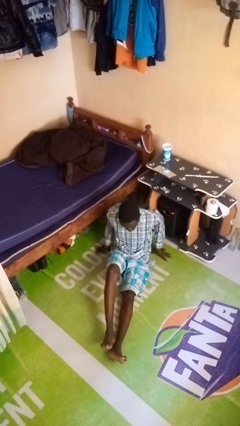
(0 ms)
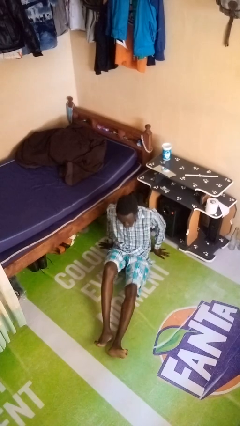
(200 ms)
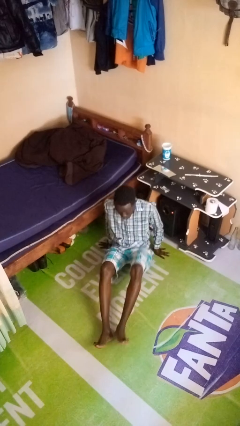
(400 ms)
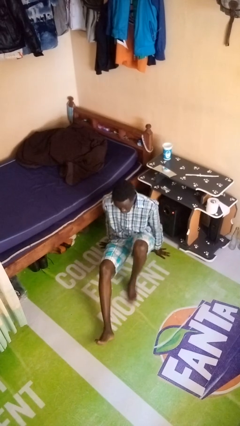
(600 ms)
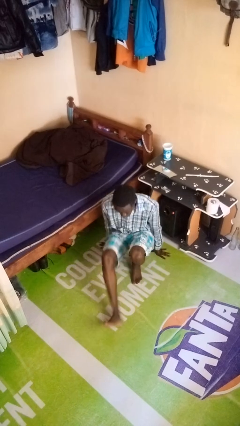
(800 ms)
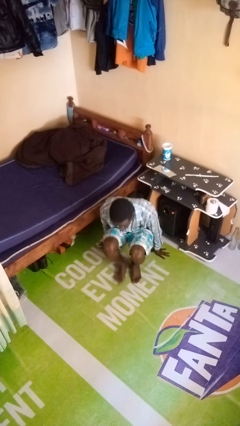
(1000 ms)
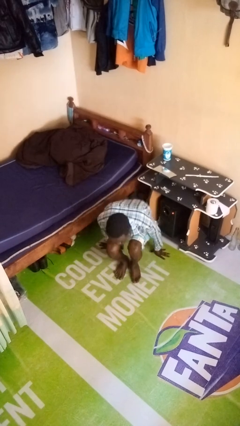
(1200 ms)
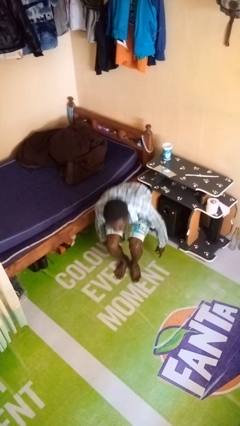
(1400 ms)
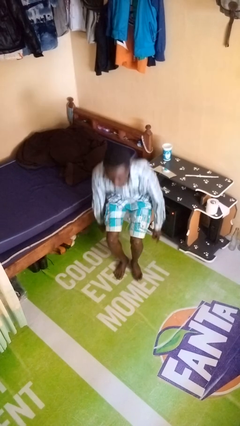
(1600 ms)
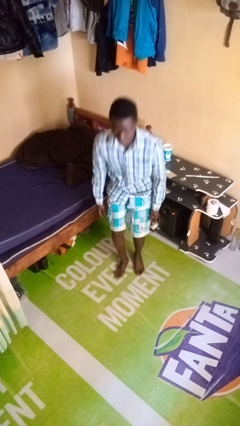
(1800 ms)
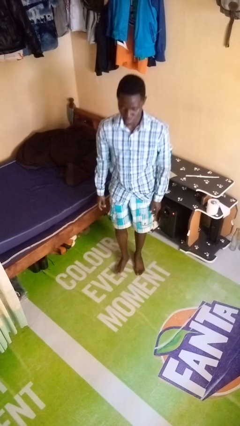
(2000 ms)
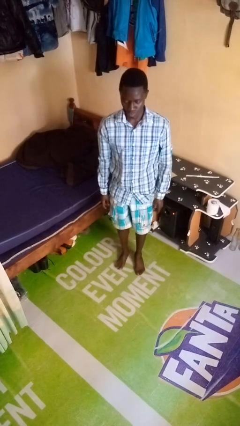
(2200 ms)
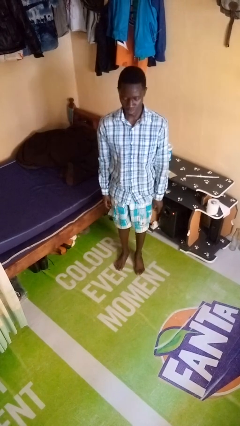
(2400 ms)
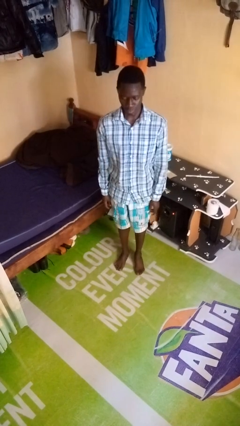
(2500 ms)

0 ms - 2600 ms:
person stands up from floor

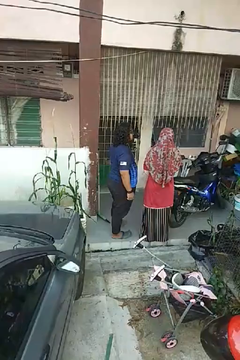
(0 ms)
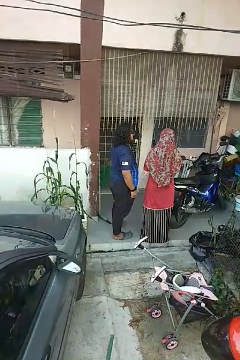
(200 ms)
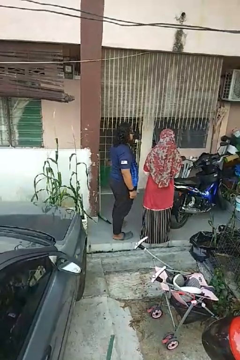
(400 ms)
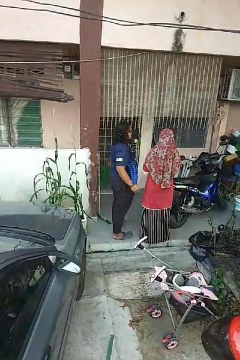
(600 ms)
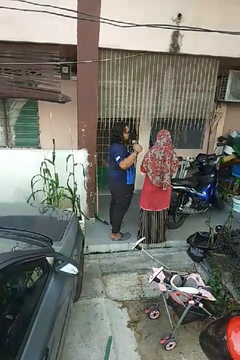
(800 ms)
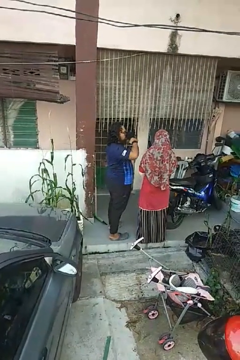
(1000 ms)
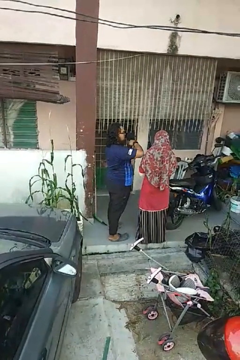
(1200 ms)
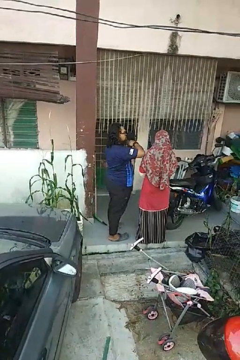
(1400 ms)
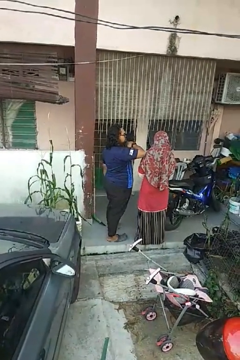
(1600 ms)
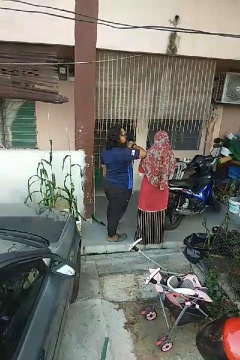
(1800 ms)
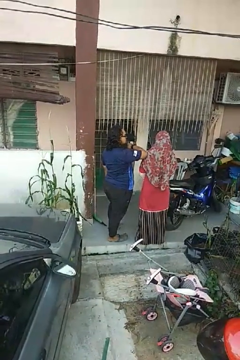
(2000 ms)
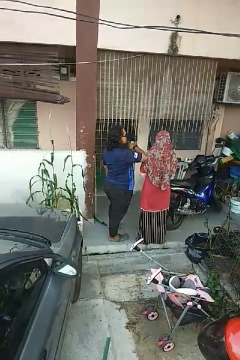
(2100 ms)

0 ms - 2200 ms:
person nudges person with elbow

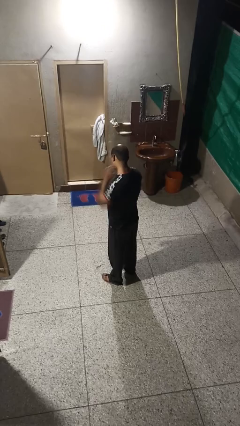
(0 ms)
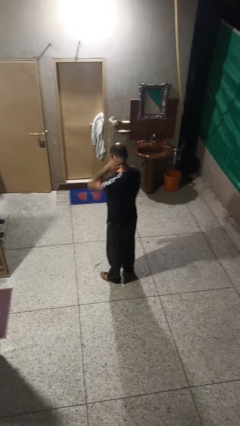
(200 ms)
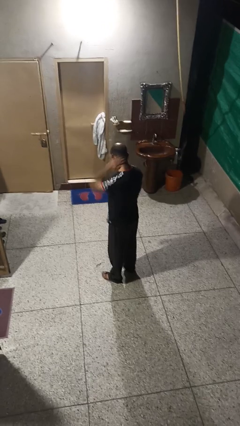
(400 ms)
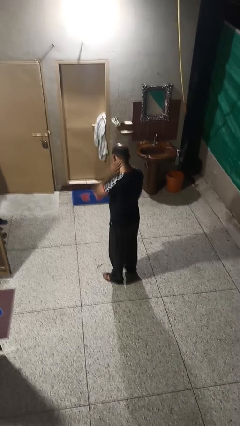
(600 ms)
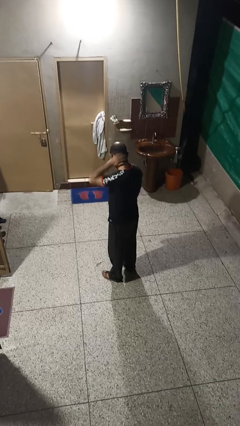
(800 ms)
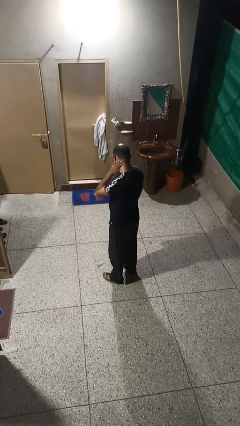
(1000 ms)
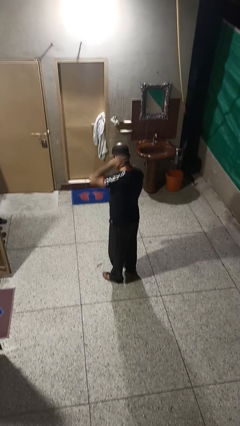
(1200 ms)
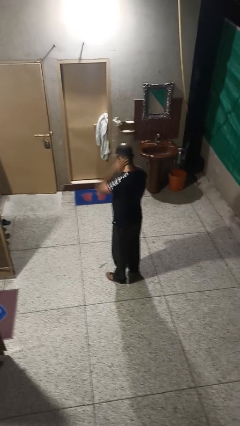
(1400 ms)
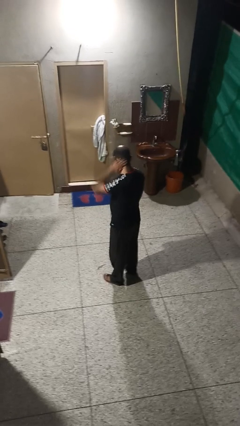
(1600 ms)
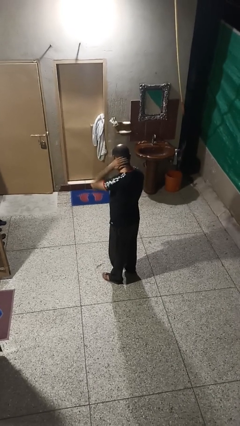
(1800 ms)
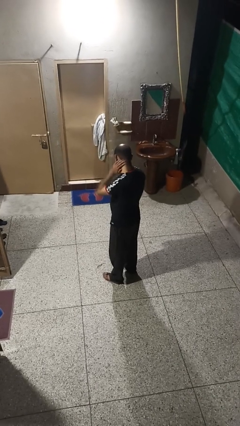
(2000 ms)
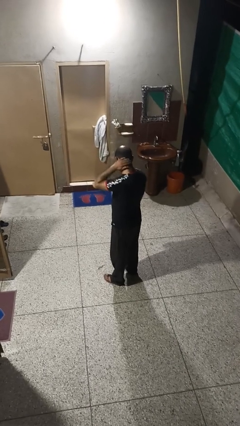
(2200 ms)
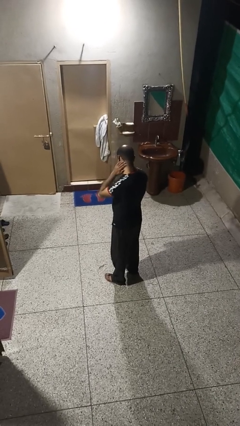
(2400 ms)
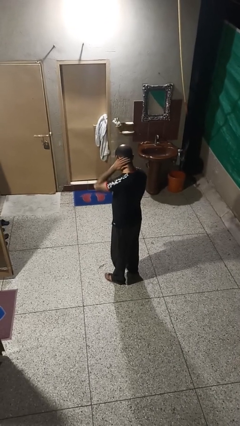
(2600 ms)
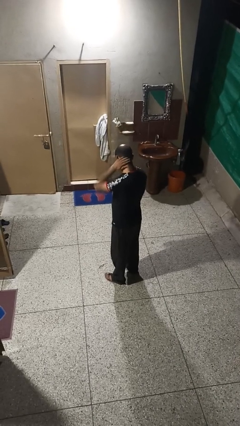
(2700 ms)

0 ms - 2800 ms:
person rubs neck

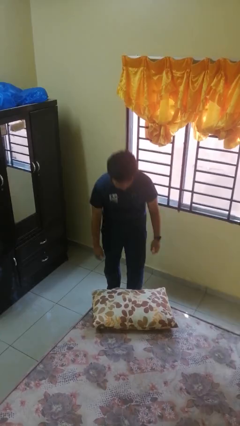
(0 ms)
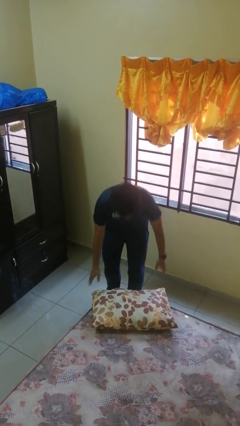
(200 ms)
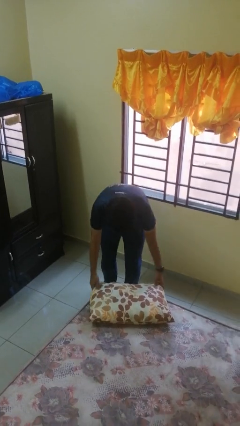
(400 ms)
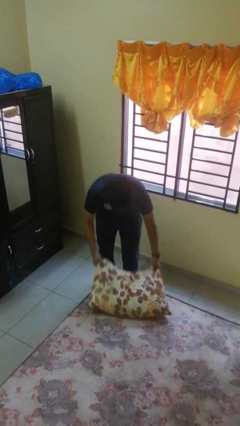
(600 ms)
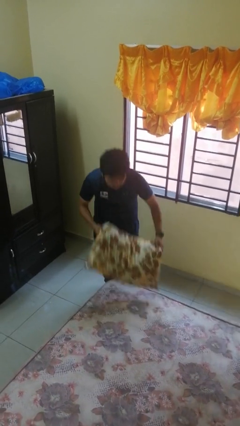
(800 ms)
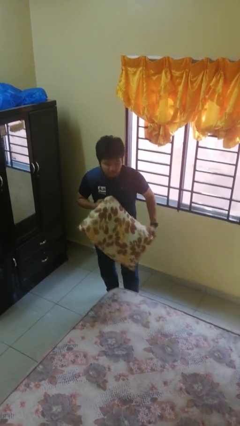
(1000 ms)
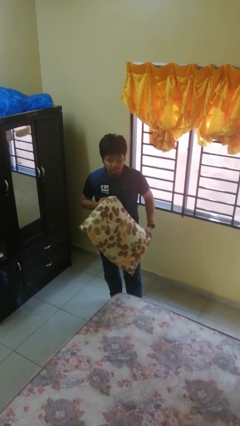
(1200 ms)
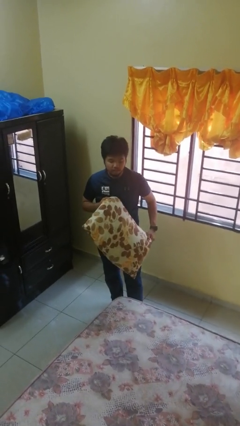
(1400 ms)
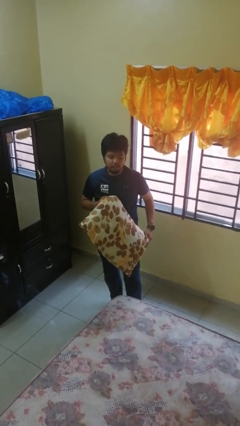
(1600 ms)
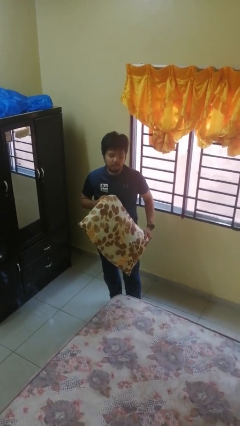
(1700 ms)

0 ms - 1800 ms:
person picks up object from bed

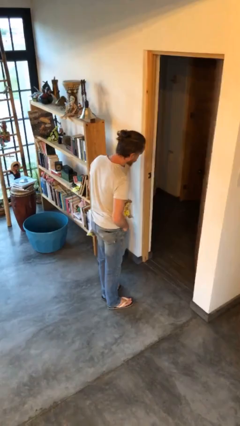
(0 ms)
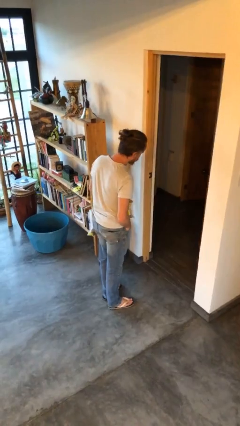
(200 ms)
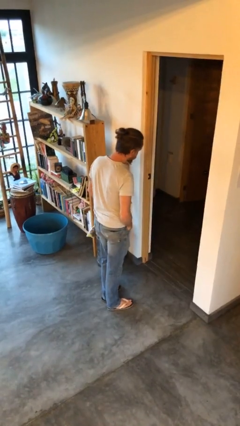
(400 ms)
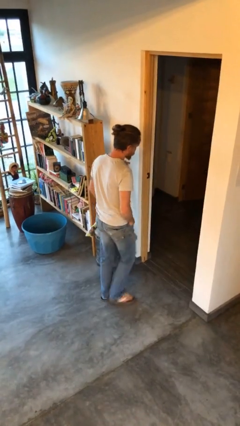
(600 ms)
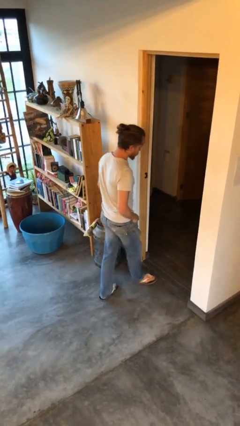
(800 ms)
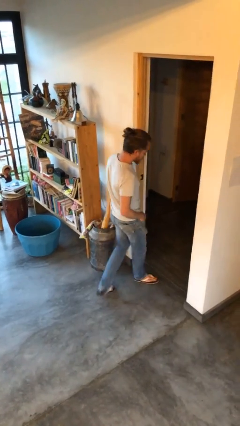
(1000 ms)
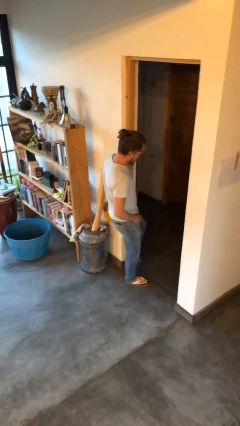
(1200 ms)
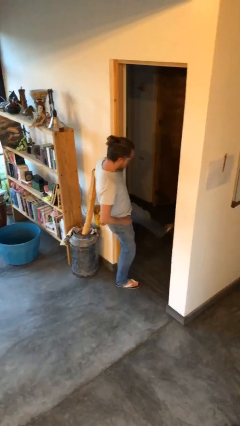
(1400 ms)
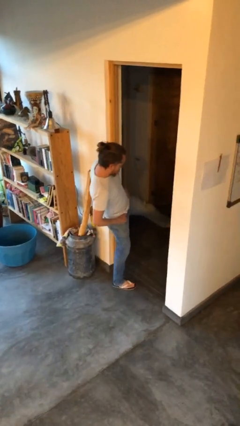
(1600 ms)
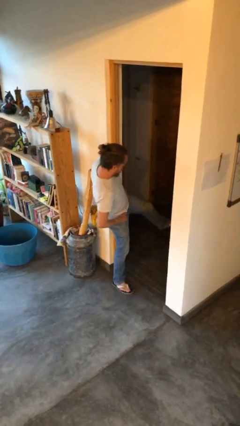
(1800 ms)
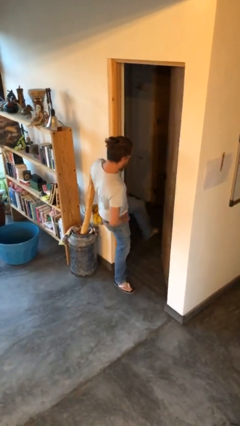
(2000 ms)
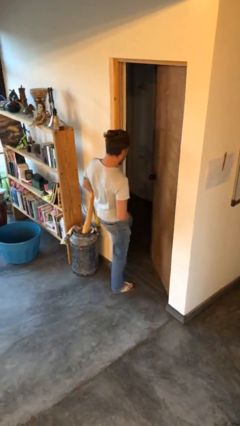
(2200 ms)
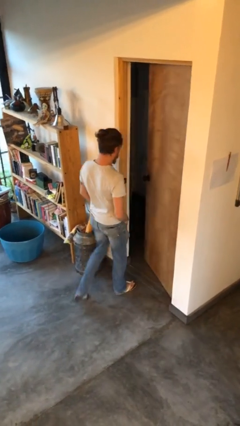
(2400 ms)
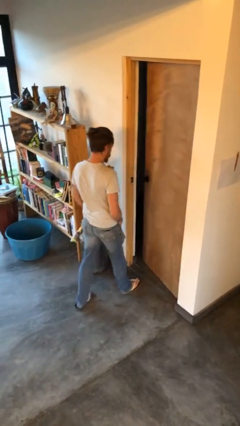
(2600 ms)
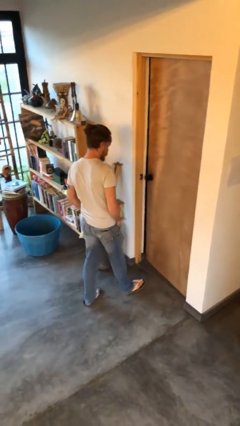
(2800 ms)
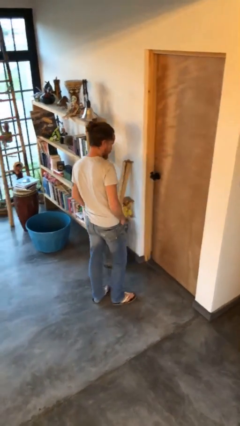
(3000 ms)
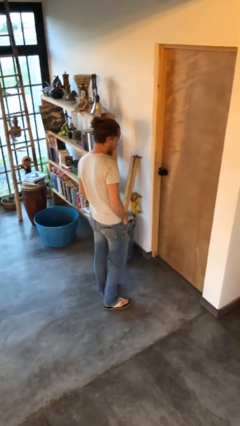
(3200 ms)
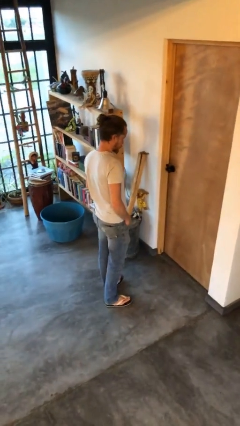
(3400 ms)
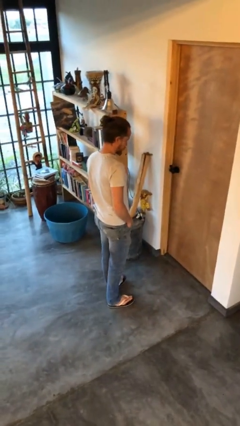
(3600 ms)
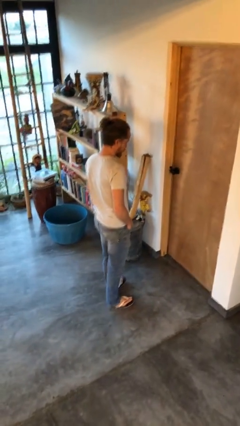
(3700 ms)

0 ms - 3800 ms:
person closes door with foot

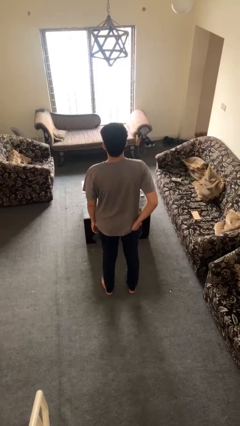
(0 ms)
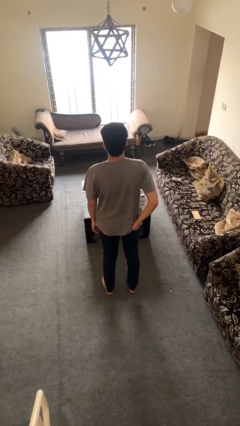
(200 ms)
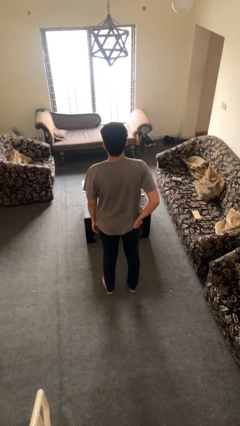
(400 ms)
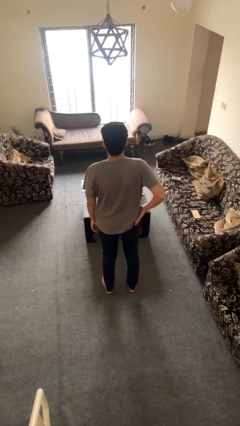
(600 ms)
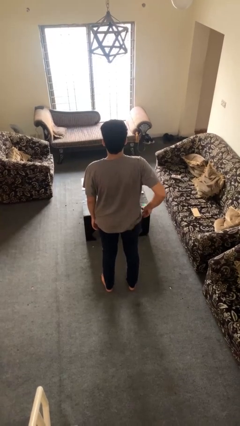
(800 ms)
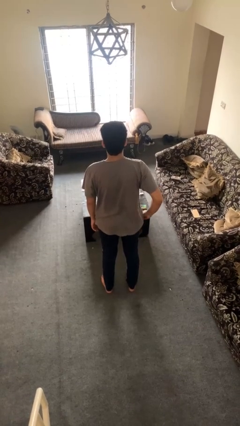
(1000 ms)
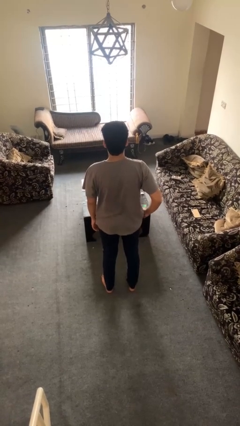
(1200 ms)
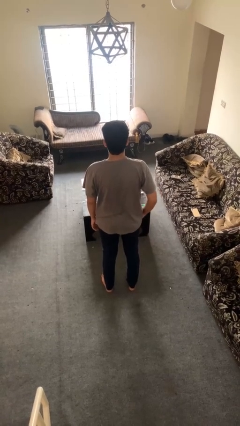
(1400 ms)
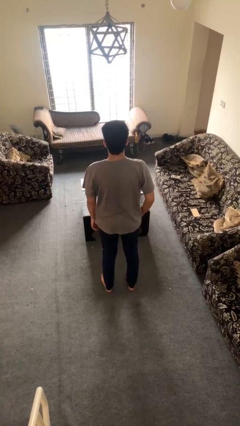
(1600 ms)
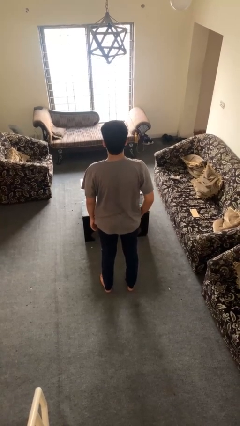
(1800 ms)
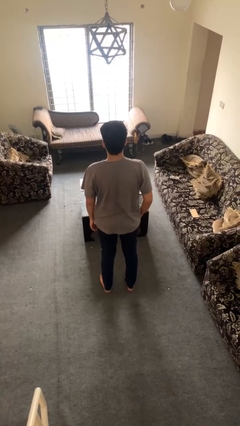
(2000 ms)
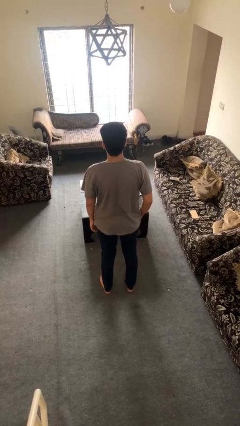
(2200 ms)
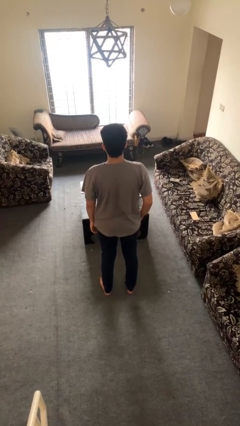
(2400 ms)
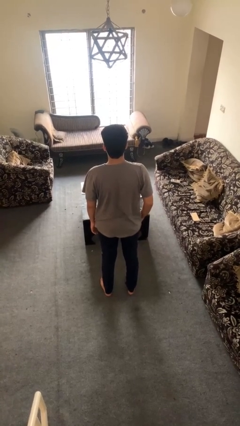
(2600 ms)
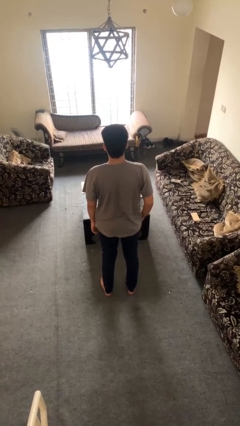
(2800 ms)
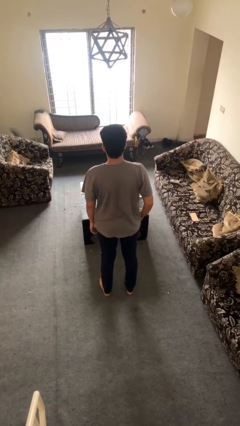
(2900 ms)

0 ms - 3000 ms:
person puts hands in back pockets

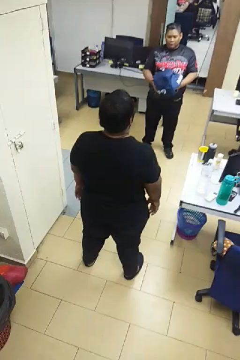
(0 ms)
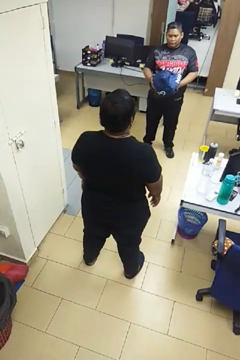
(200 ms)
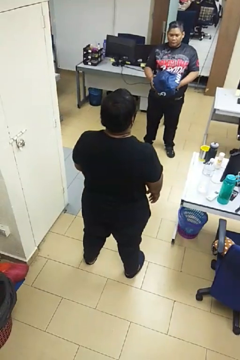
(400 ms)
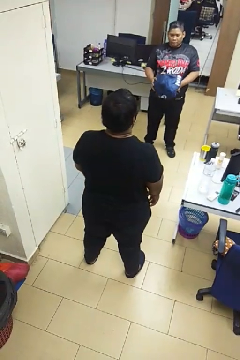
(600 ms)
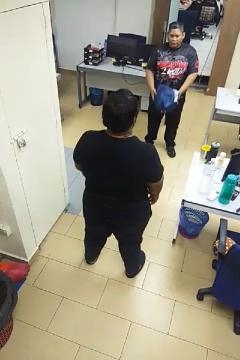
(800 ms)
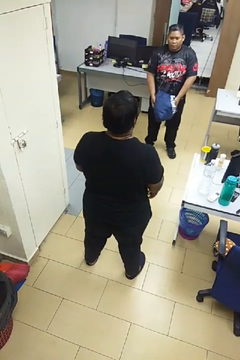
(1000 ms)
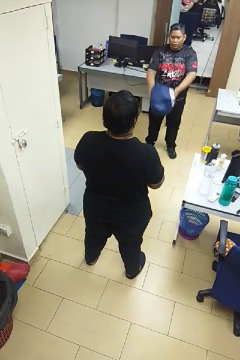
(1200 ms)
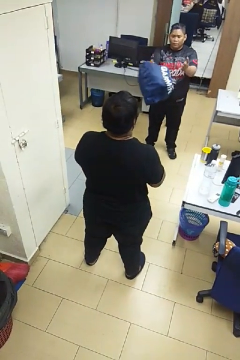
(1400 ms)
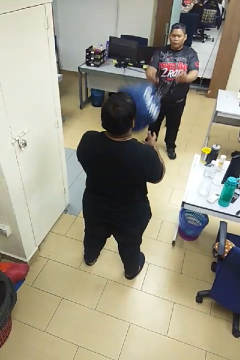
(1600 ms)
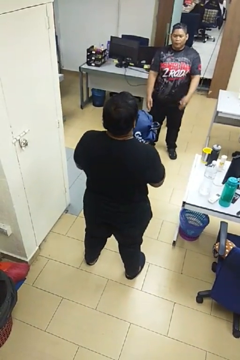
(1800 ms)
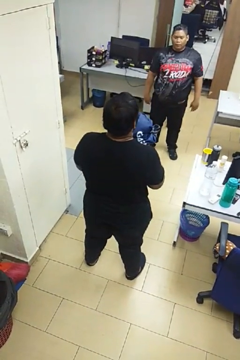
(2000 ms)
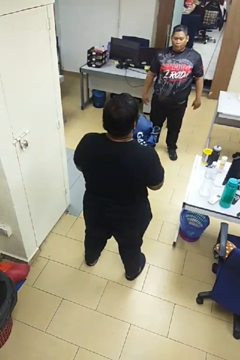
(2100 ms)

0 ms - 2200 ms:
person catches object from person
